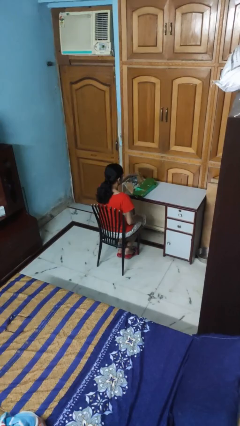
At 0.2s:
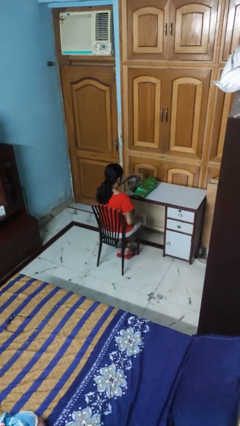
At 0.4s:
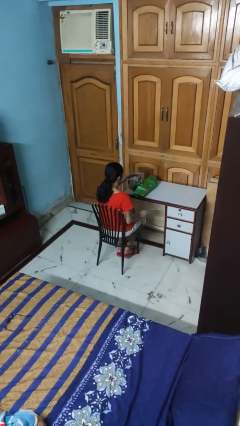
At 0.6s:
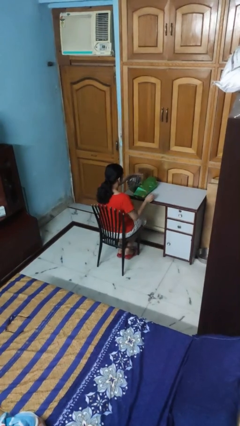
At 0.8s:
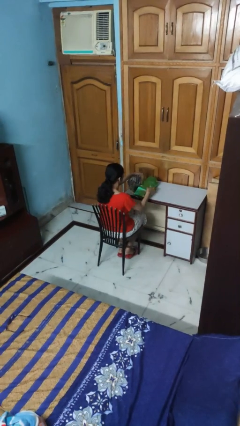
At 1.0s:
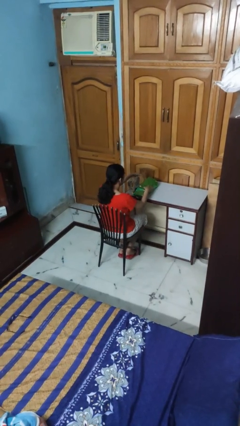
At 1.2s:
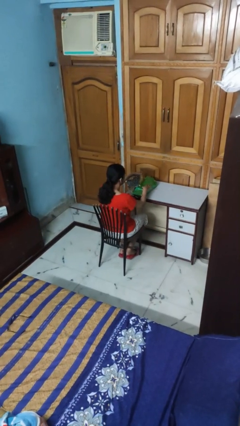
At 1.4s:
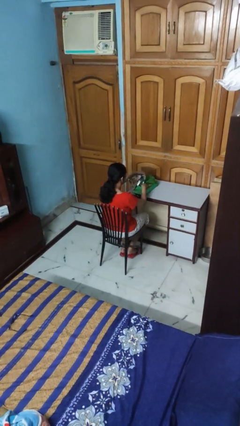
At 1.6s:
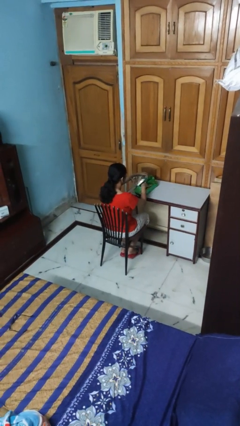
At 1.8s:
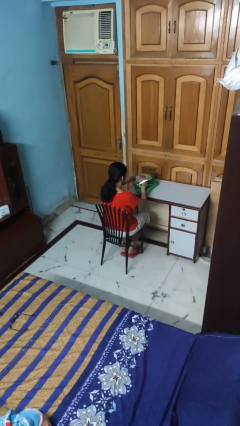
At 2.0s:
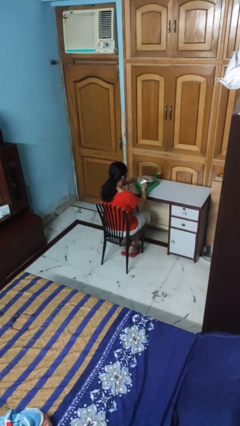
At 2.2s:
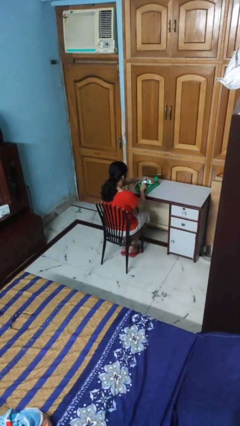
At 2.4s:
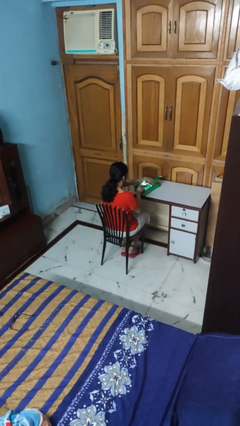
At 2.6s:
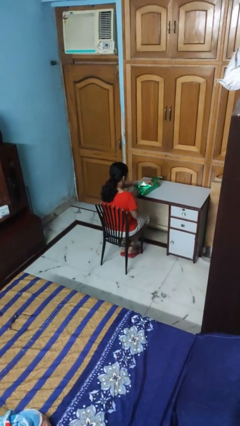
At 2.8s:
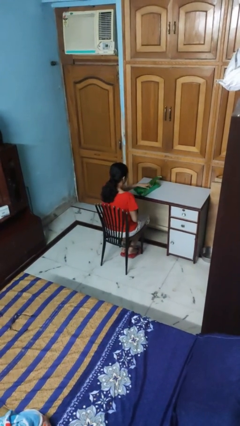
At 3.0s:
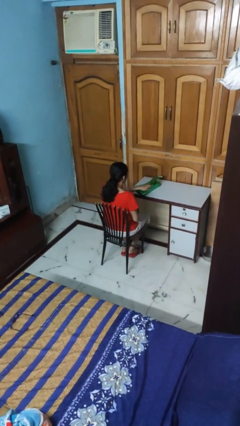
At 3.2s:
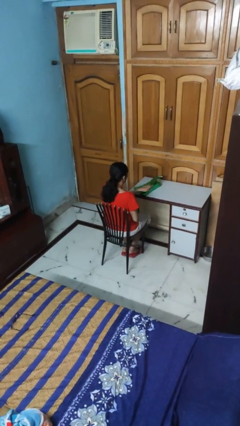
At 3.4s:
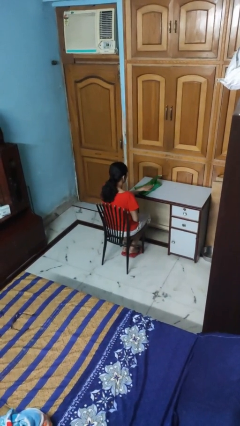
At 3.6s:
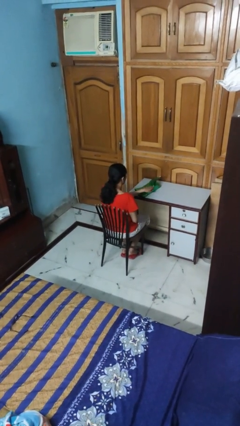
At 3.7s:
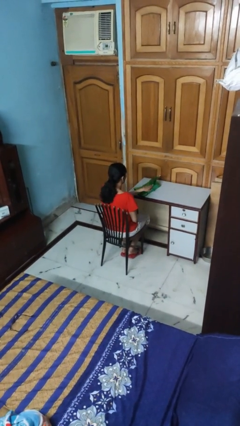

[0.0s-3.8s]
person wraps box

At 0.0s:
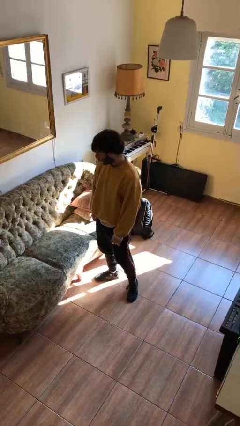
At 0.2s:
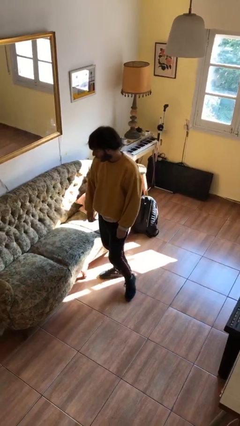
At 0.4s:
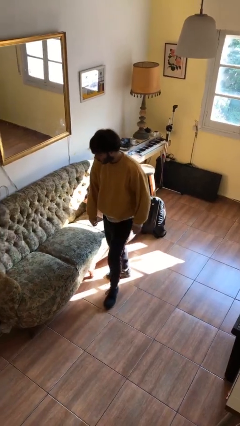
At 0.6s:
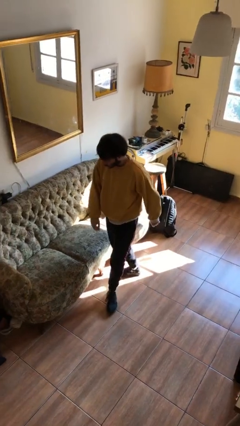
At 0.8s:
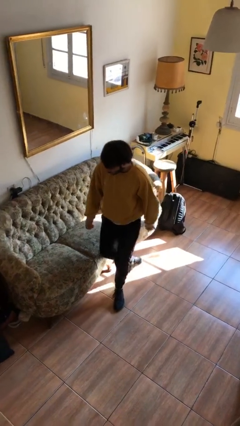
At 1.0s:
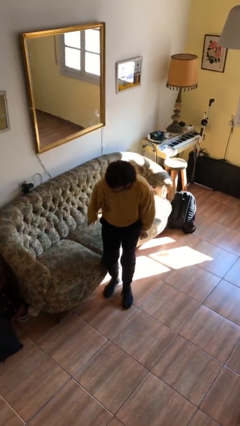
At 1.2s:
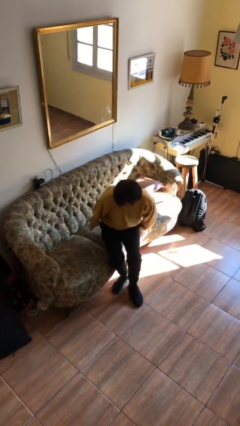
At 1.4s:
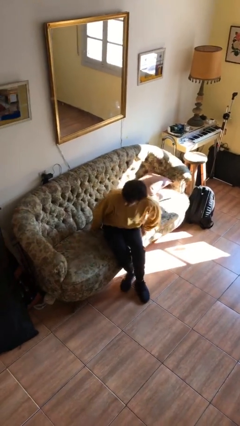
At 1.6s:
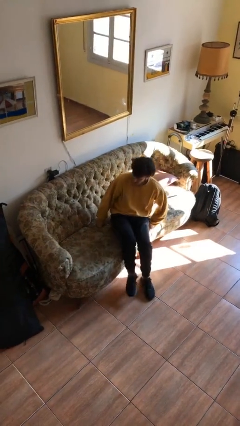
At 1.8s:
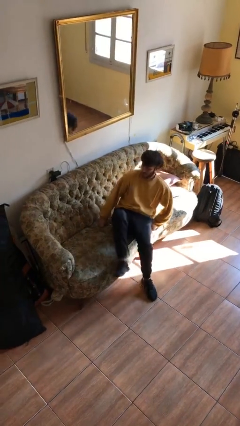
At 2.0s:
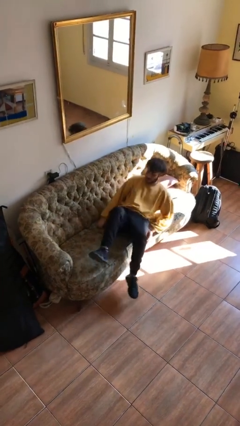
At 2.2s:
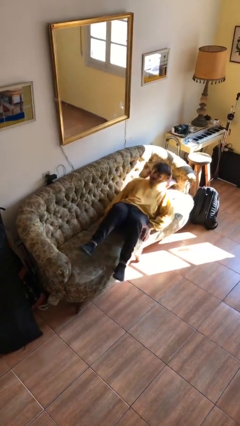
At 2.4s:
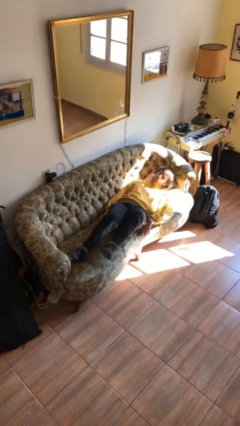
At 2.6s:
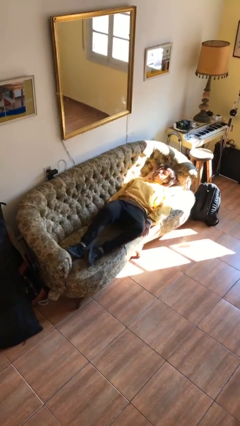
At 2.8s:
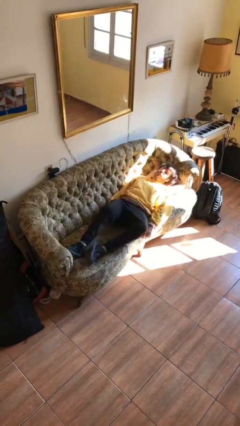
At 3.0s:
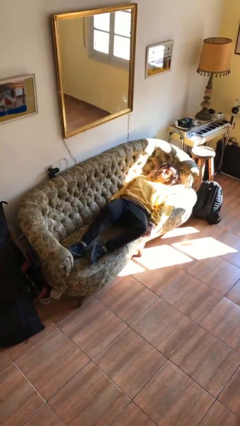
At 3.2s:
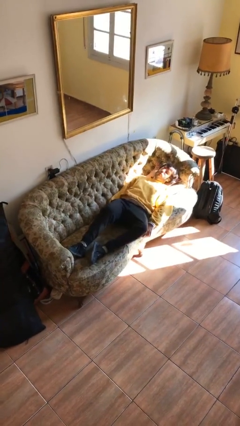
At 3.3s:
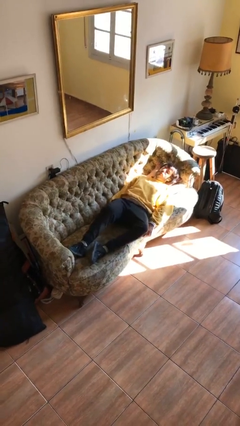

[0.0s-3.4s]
person lies down on couch

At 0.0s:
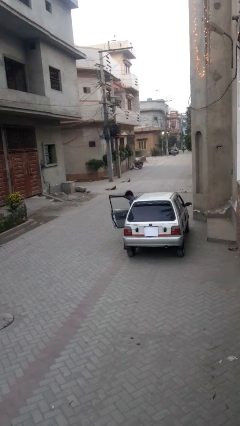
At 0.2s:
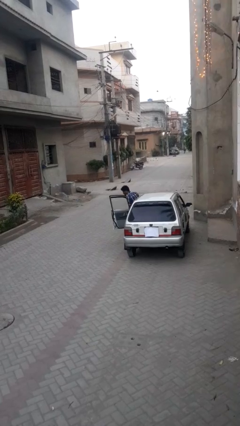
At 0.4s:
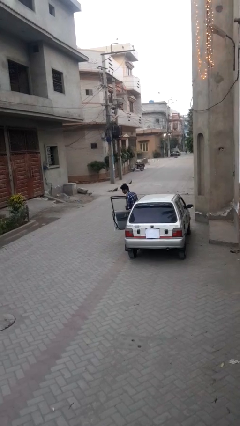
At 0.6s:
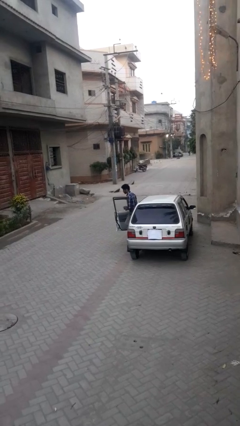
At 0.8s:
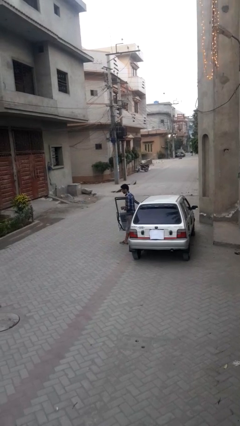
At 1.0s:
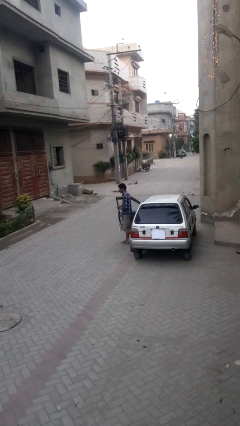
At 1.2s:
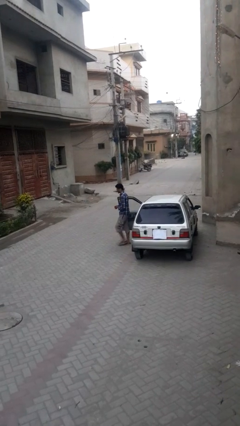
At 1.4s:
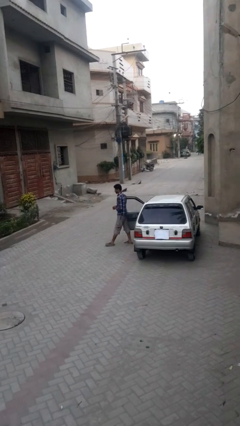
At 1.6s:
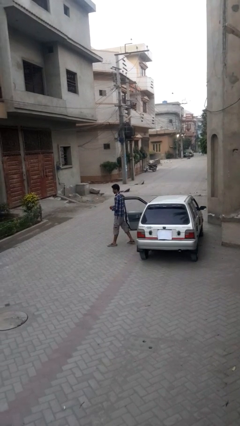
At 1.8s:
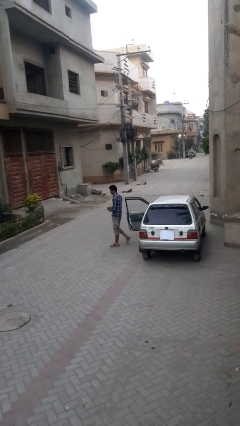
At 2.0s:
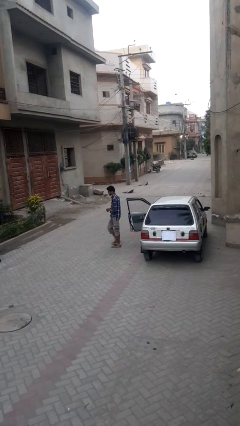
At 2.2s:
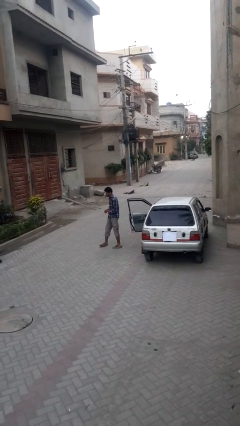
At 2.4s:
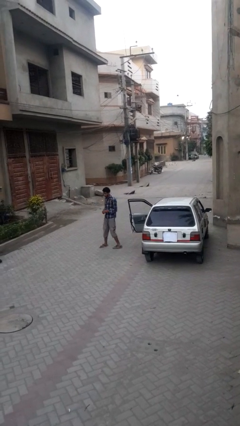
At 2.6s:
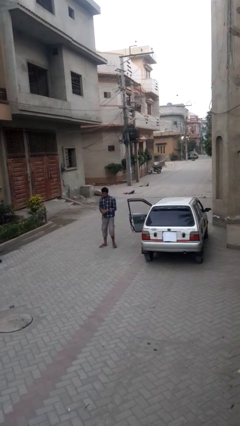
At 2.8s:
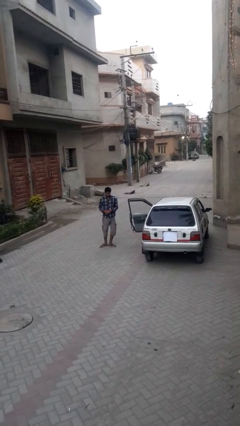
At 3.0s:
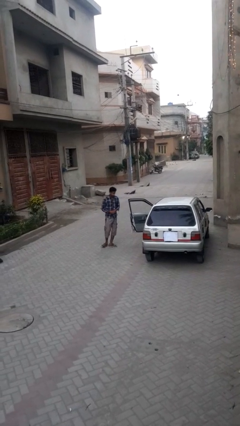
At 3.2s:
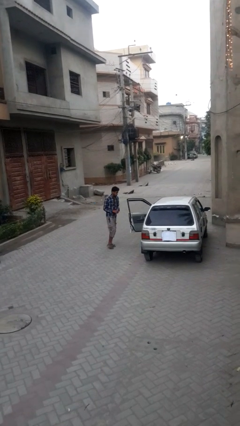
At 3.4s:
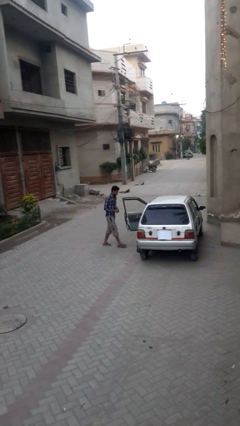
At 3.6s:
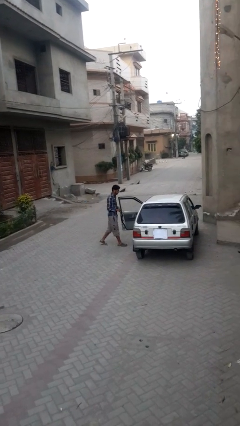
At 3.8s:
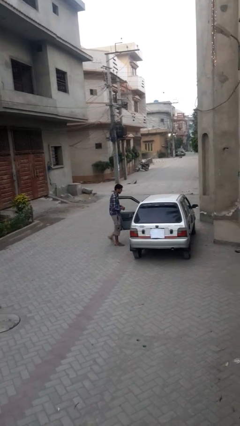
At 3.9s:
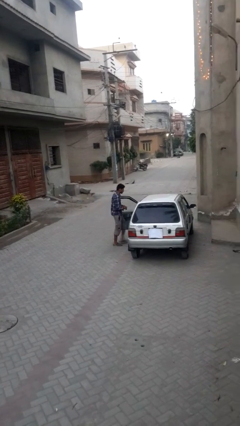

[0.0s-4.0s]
person exits car

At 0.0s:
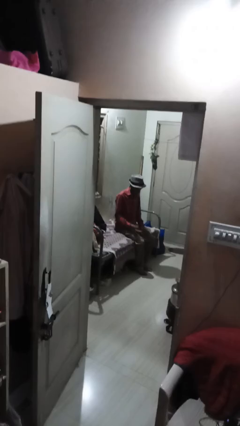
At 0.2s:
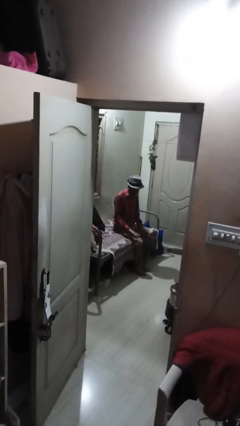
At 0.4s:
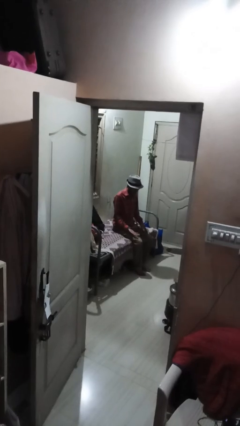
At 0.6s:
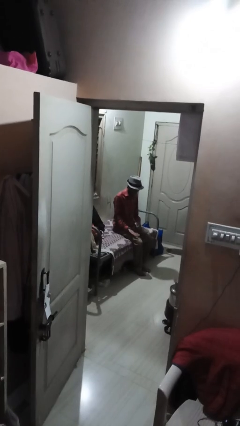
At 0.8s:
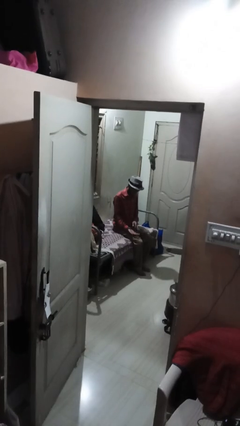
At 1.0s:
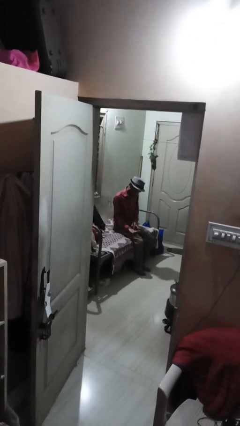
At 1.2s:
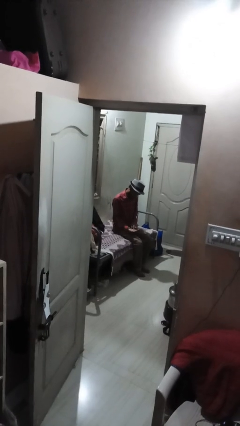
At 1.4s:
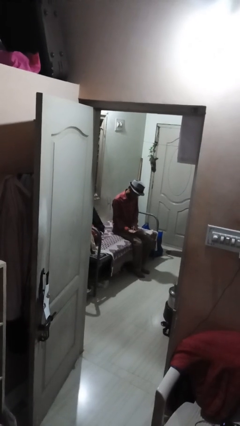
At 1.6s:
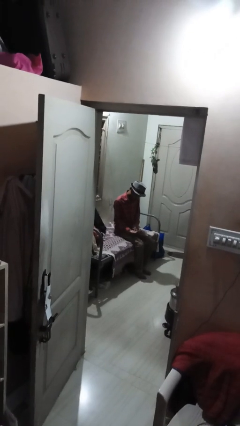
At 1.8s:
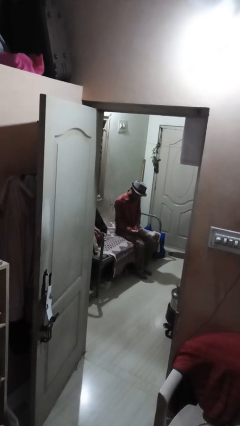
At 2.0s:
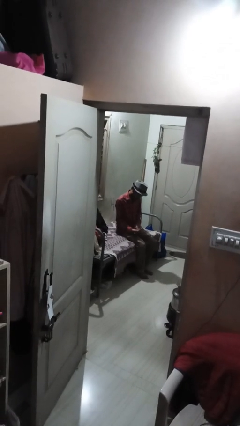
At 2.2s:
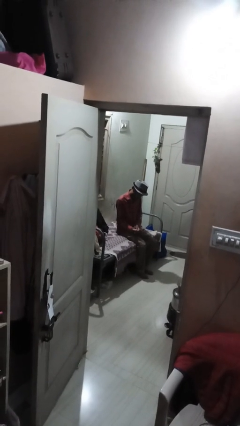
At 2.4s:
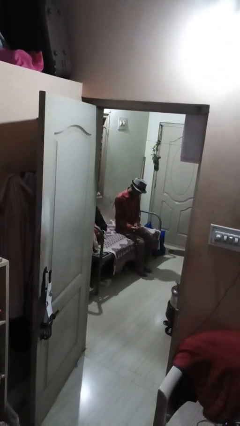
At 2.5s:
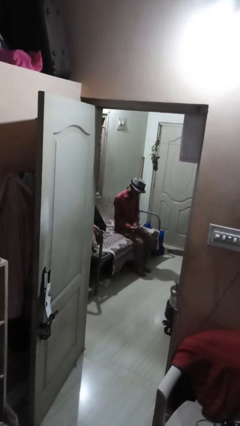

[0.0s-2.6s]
person looks at hands in lap

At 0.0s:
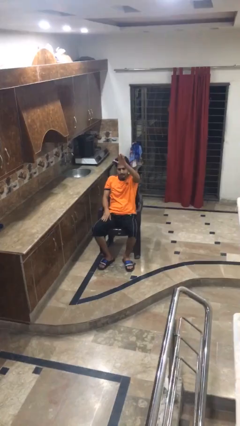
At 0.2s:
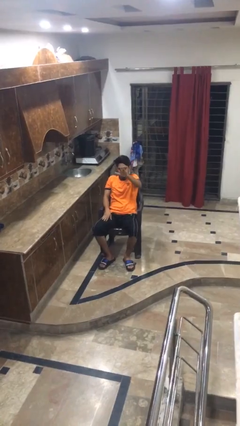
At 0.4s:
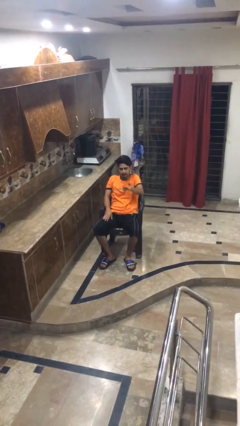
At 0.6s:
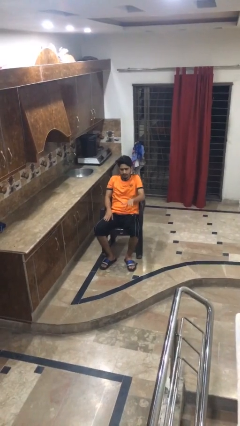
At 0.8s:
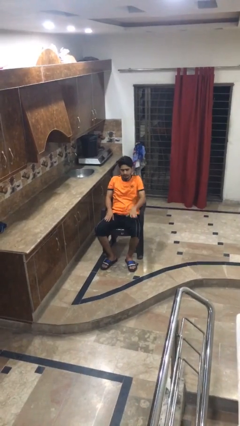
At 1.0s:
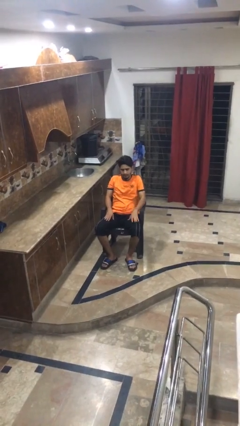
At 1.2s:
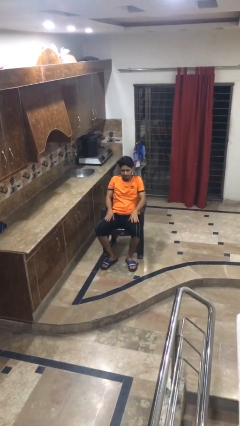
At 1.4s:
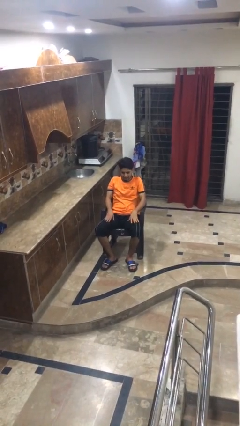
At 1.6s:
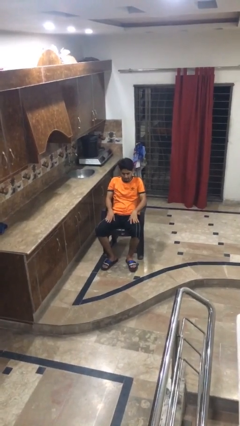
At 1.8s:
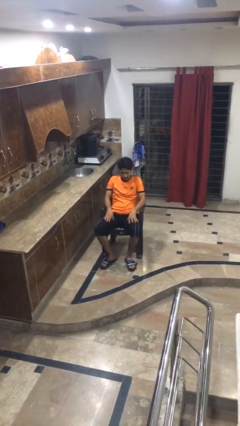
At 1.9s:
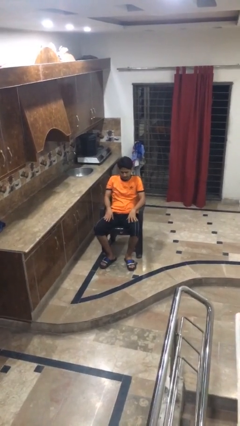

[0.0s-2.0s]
person gestures swipe down

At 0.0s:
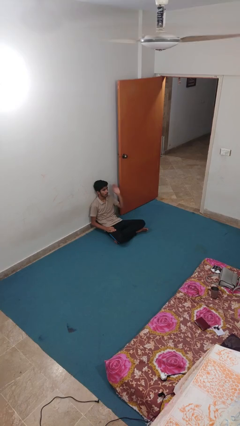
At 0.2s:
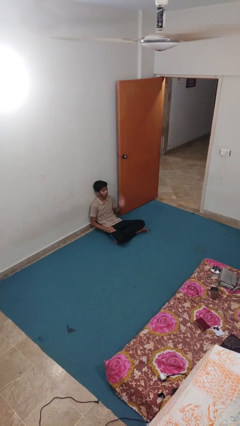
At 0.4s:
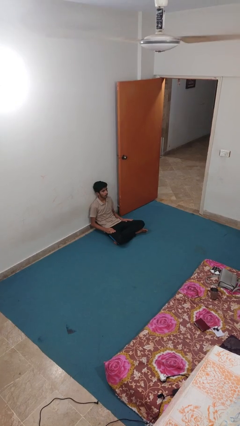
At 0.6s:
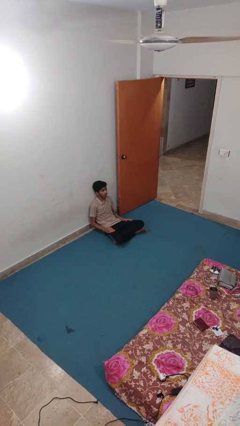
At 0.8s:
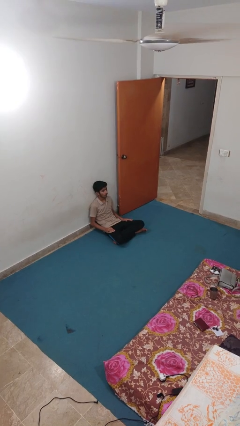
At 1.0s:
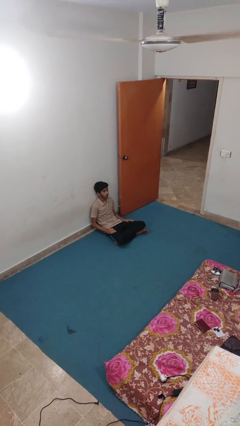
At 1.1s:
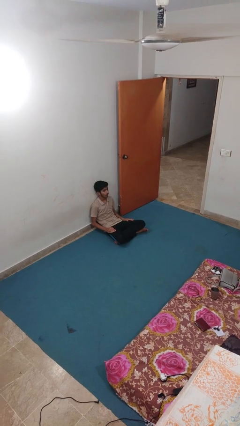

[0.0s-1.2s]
person slaps hands on thighs

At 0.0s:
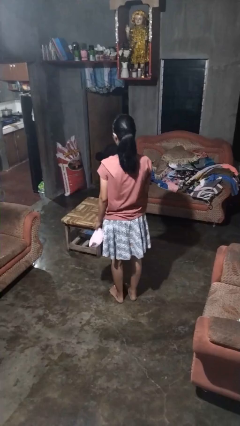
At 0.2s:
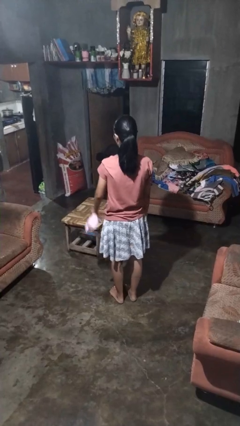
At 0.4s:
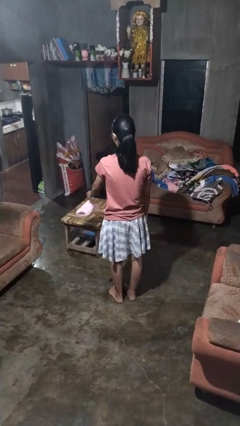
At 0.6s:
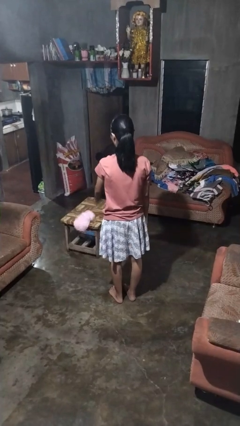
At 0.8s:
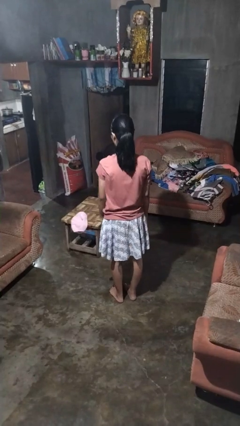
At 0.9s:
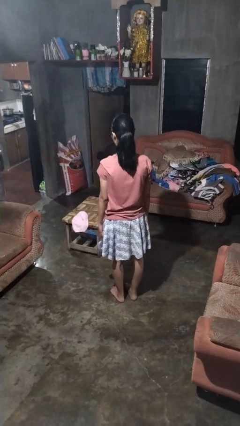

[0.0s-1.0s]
person throws object on table
